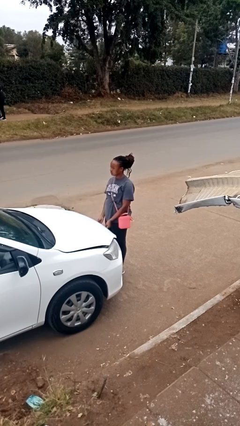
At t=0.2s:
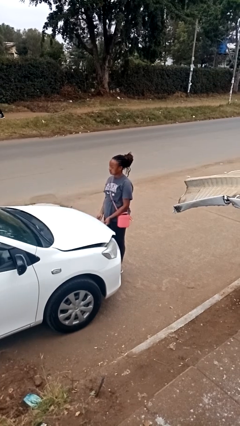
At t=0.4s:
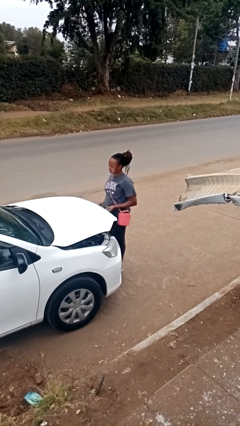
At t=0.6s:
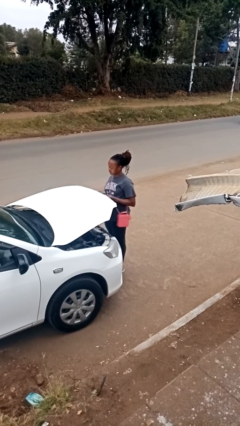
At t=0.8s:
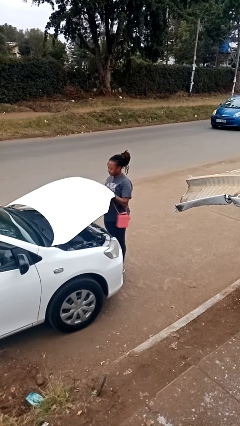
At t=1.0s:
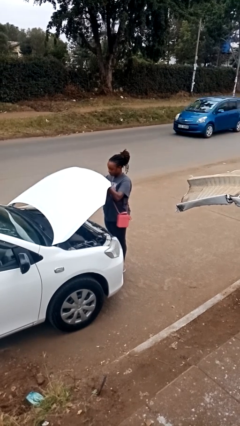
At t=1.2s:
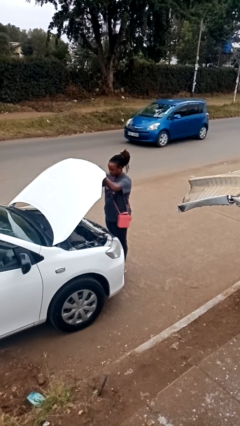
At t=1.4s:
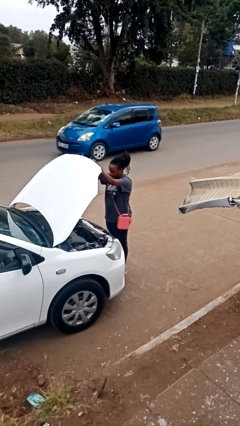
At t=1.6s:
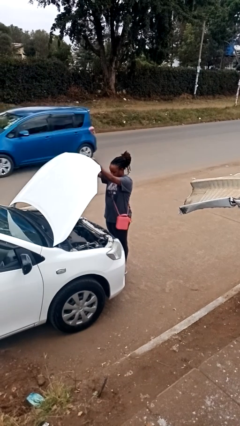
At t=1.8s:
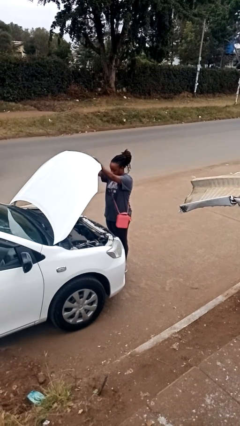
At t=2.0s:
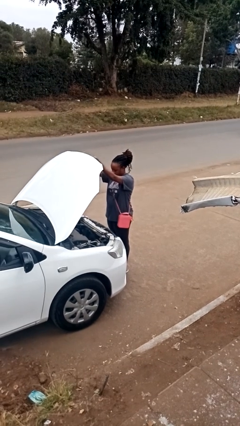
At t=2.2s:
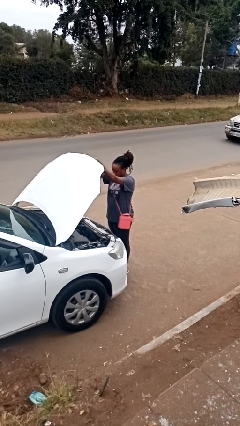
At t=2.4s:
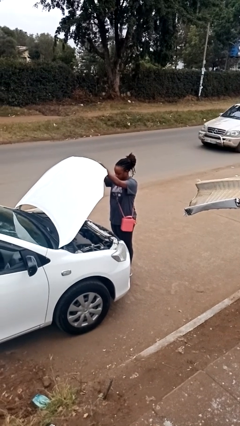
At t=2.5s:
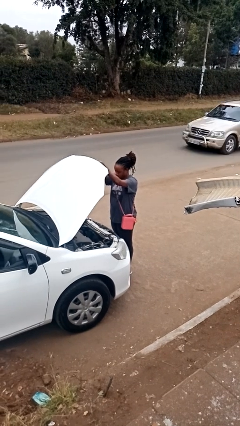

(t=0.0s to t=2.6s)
person opens car hood

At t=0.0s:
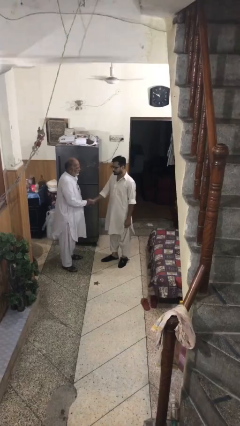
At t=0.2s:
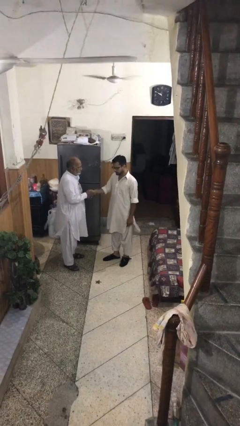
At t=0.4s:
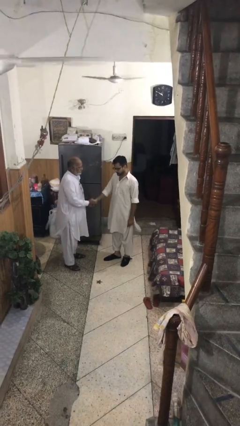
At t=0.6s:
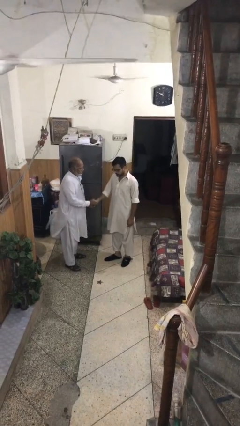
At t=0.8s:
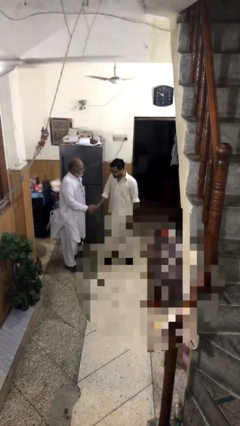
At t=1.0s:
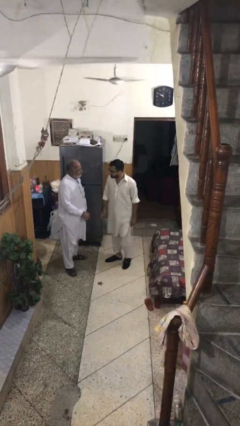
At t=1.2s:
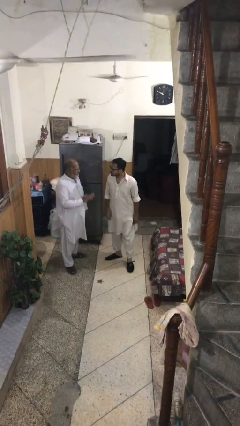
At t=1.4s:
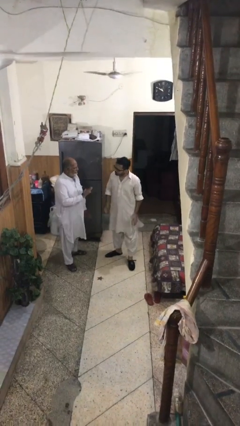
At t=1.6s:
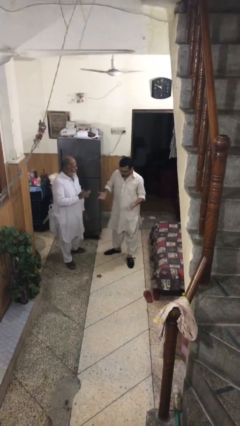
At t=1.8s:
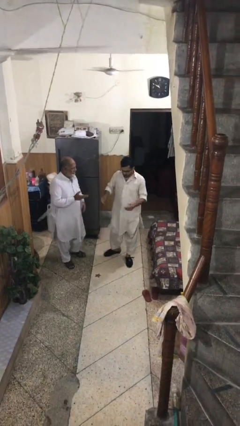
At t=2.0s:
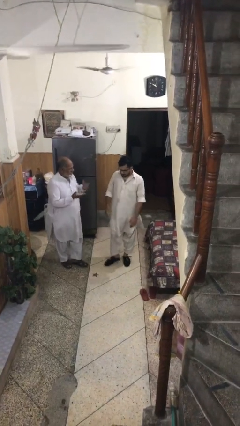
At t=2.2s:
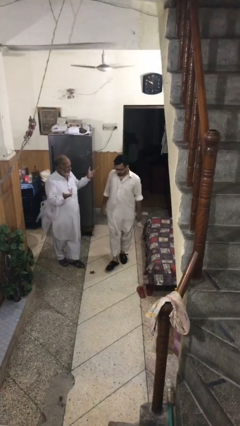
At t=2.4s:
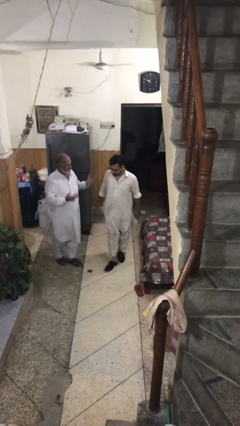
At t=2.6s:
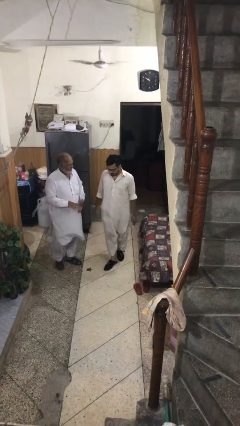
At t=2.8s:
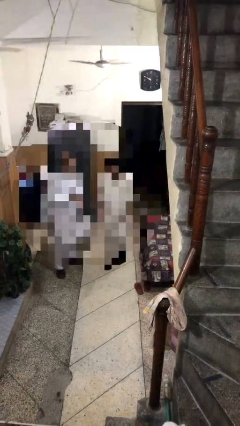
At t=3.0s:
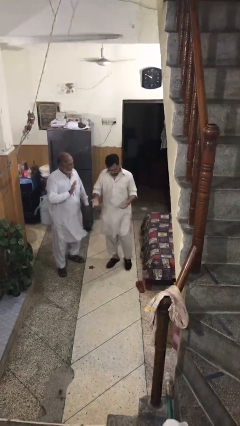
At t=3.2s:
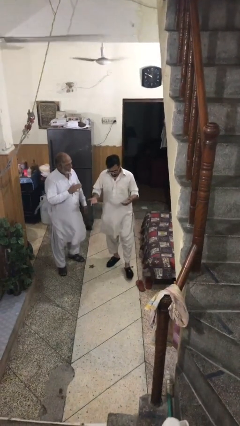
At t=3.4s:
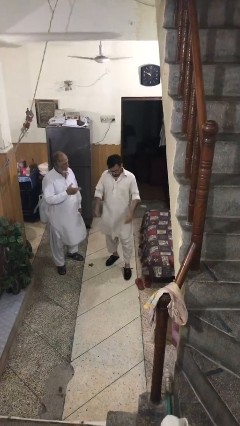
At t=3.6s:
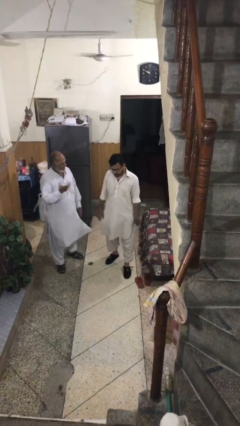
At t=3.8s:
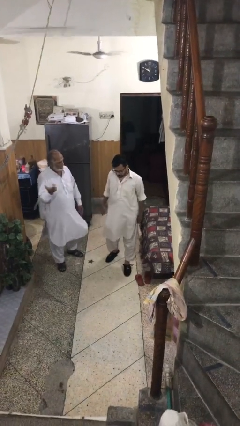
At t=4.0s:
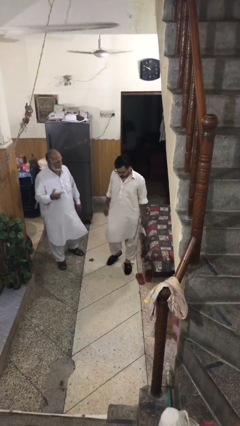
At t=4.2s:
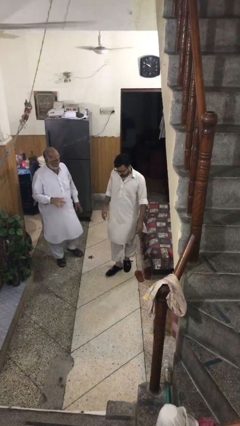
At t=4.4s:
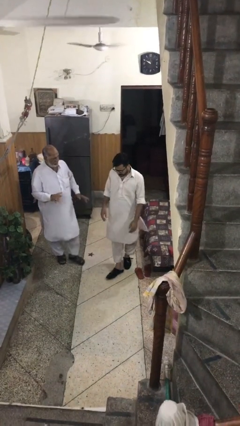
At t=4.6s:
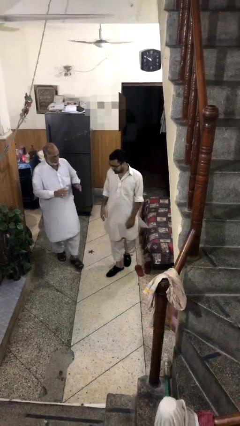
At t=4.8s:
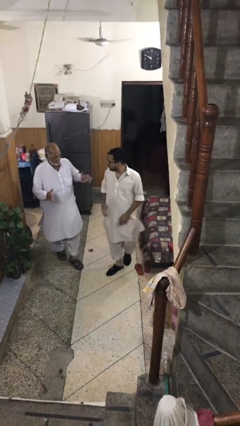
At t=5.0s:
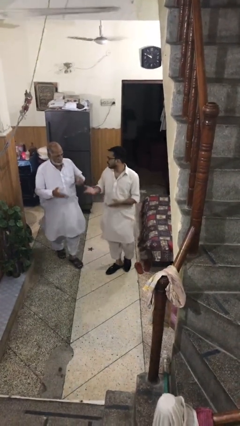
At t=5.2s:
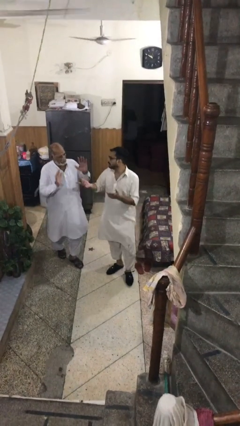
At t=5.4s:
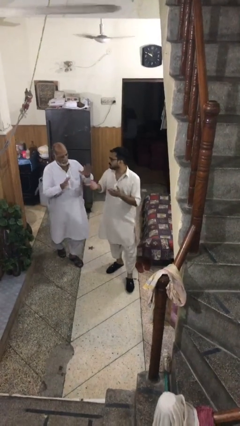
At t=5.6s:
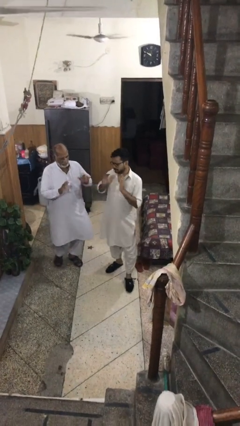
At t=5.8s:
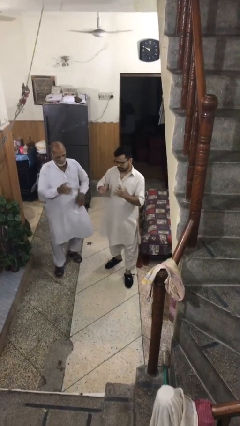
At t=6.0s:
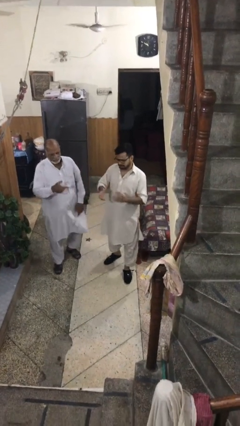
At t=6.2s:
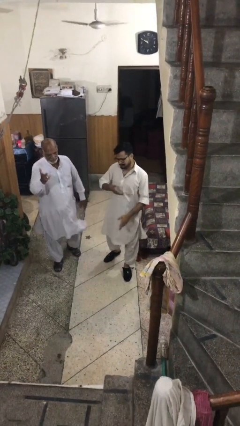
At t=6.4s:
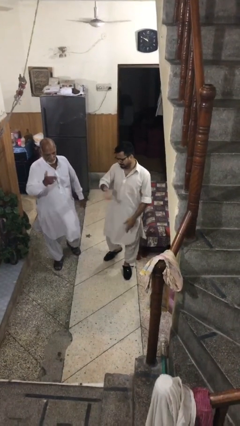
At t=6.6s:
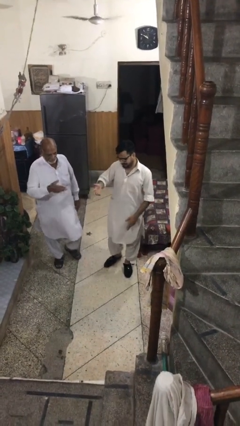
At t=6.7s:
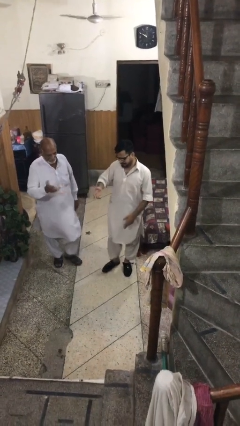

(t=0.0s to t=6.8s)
person talks to person

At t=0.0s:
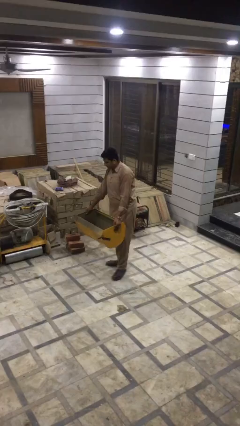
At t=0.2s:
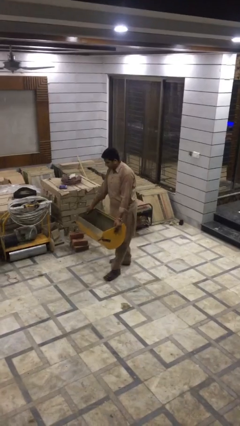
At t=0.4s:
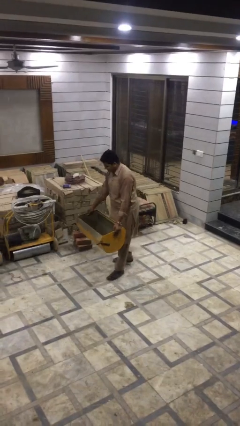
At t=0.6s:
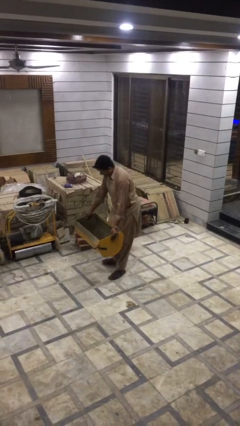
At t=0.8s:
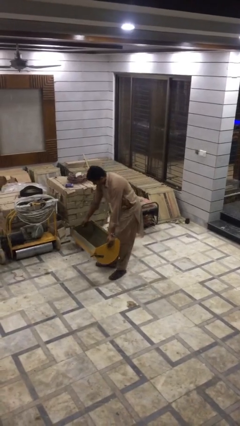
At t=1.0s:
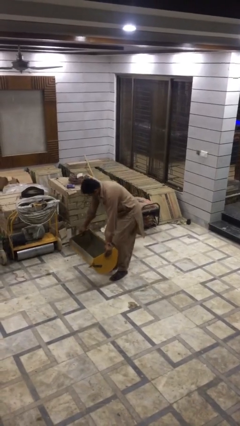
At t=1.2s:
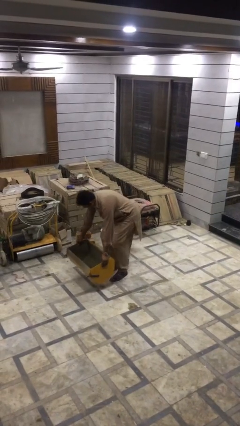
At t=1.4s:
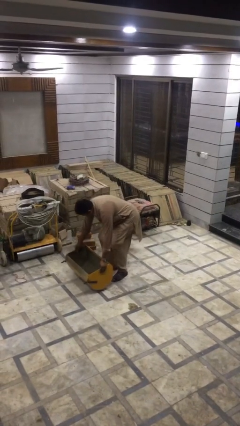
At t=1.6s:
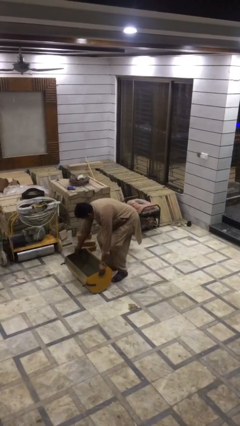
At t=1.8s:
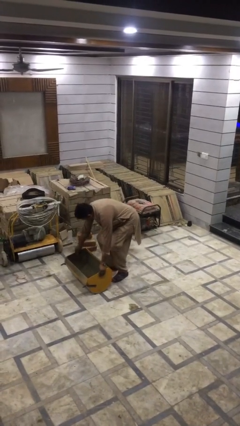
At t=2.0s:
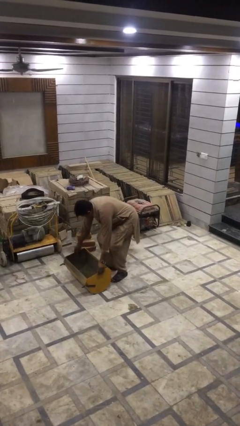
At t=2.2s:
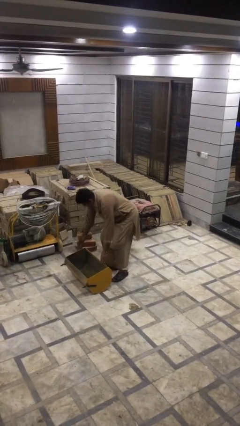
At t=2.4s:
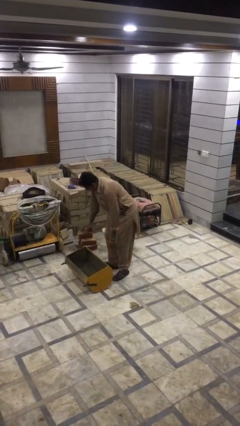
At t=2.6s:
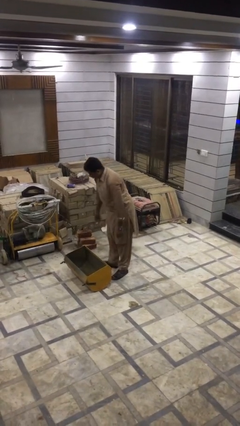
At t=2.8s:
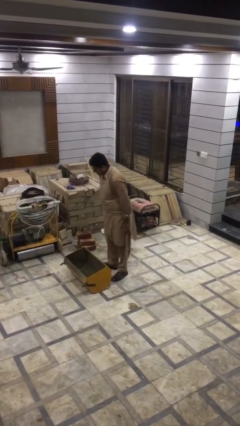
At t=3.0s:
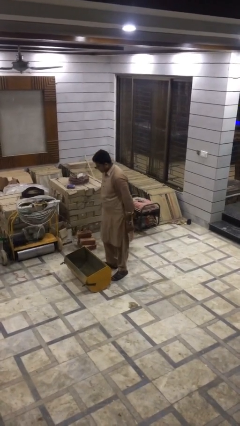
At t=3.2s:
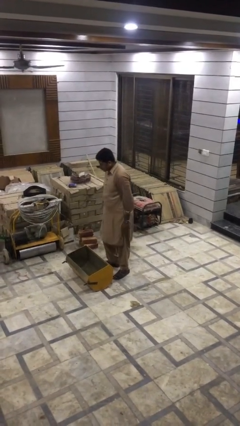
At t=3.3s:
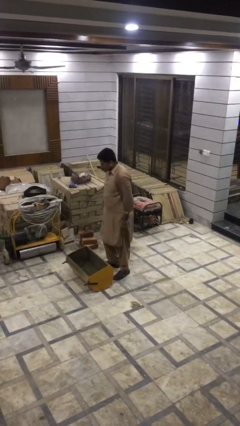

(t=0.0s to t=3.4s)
person puts down object on floor

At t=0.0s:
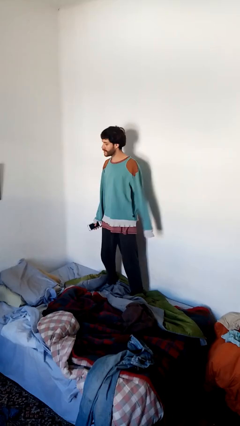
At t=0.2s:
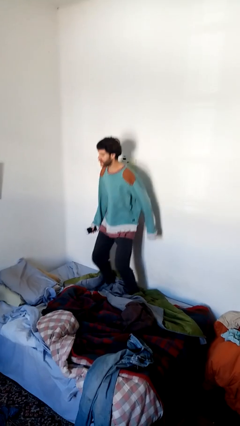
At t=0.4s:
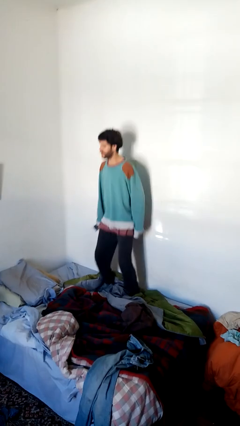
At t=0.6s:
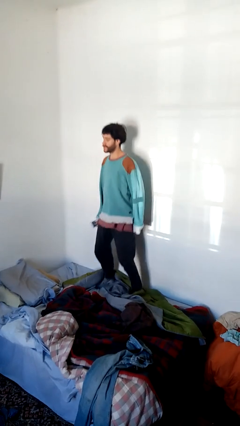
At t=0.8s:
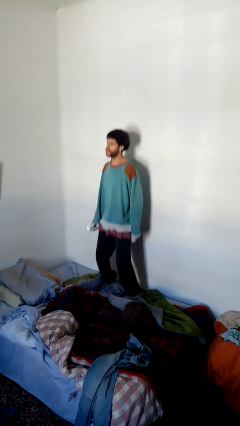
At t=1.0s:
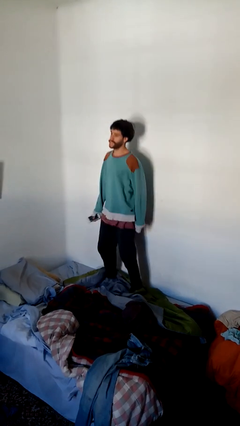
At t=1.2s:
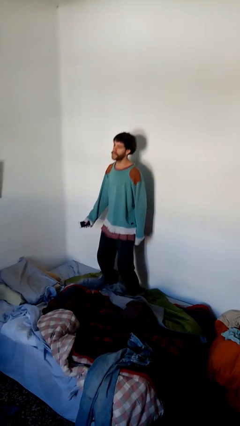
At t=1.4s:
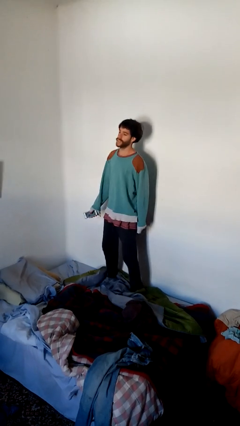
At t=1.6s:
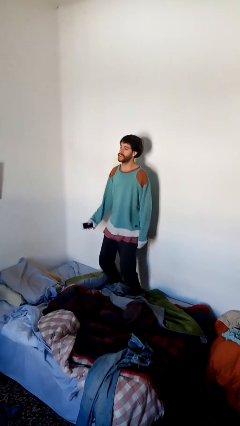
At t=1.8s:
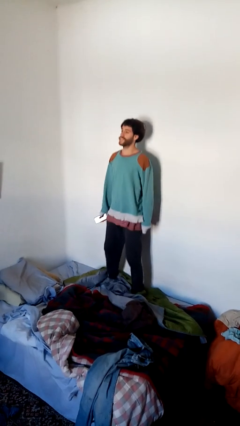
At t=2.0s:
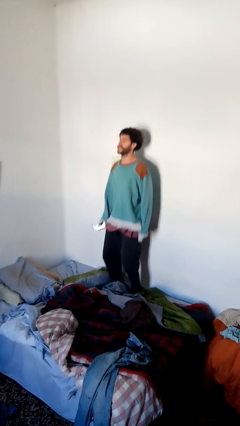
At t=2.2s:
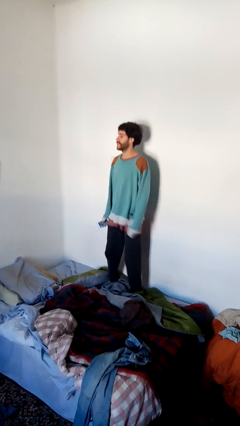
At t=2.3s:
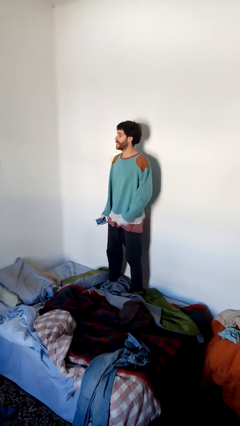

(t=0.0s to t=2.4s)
person jumps on bed

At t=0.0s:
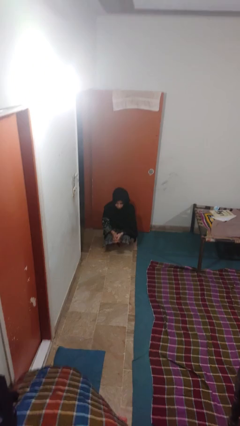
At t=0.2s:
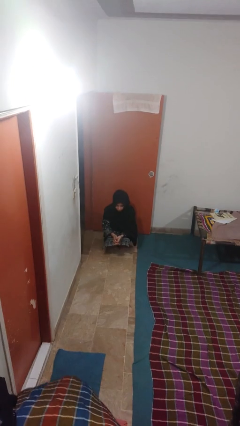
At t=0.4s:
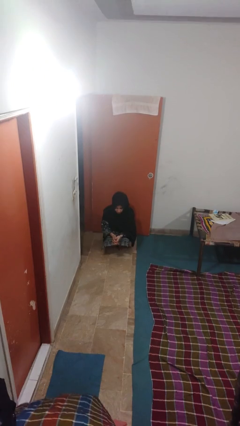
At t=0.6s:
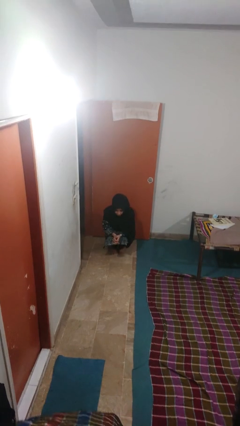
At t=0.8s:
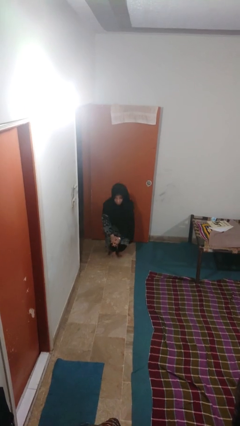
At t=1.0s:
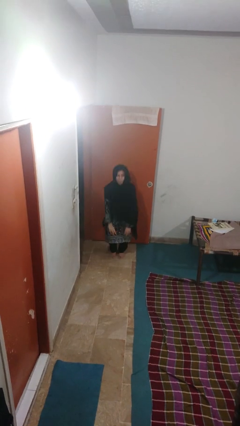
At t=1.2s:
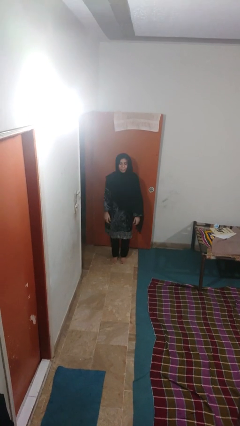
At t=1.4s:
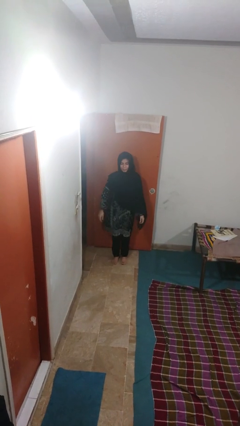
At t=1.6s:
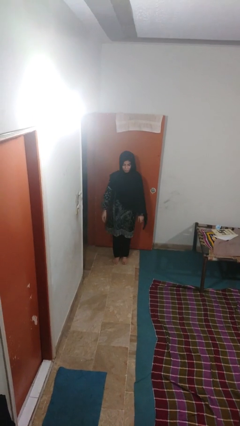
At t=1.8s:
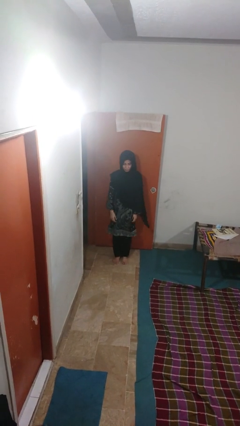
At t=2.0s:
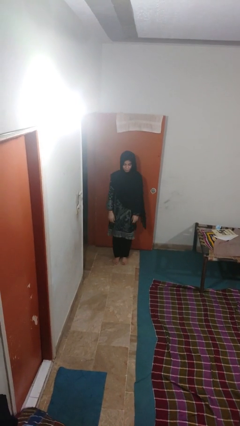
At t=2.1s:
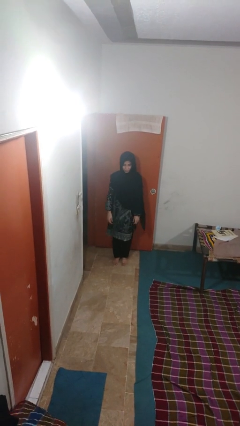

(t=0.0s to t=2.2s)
person stands up
